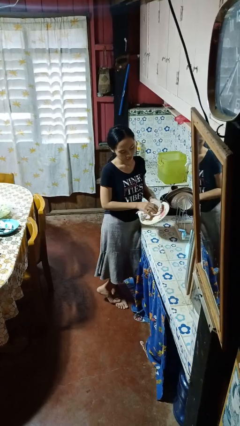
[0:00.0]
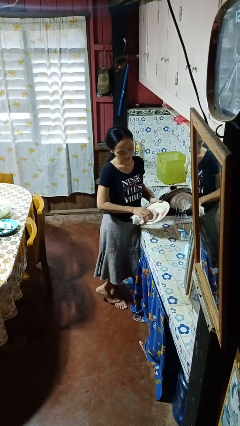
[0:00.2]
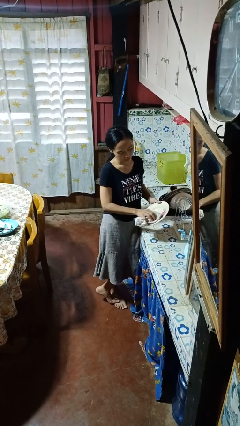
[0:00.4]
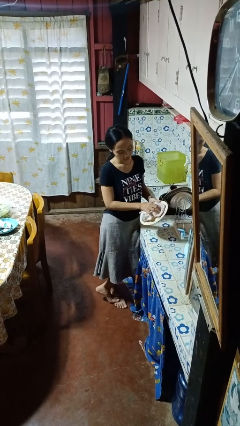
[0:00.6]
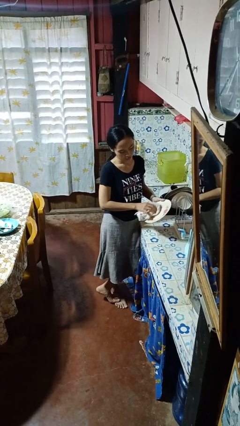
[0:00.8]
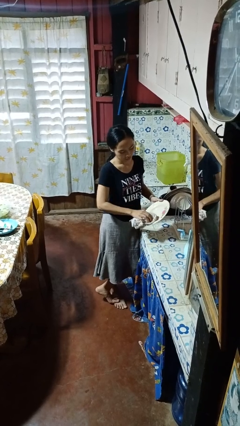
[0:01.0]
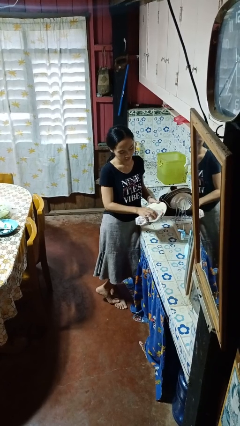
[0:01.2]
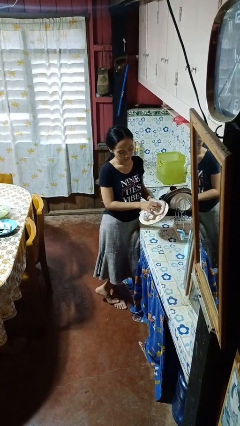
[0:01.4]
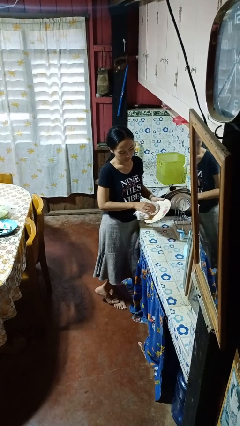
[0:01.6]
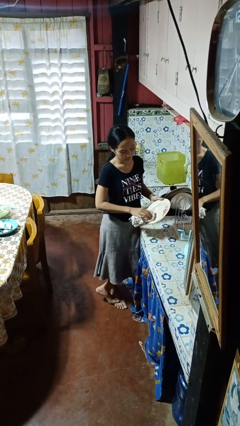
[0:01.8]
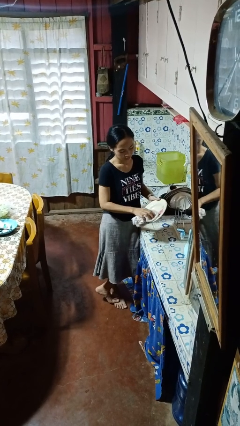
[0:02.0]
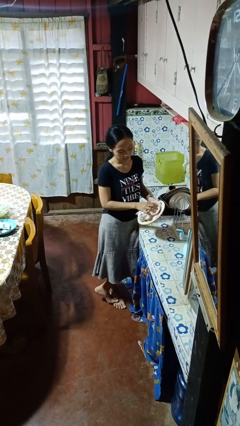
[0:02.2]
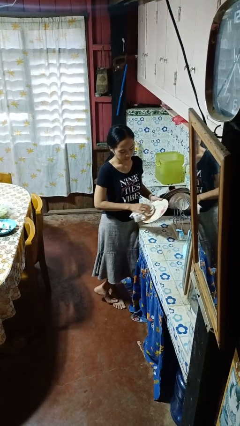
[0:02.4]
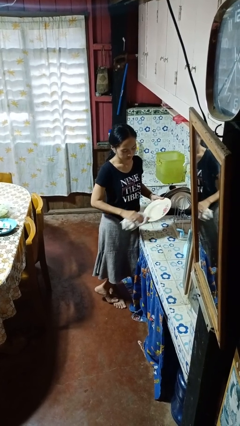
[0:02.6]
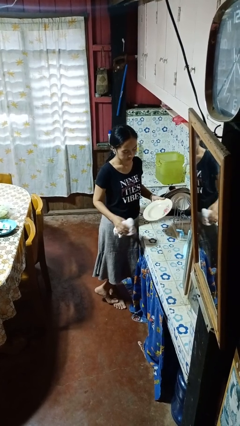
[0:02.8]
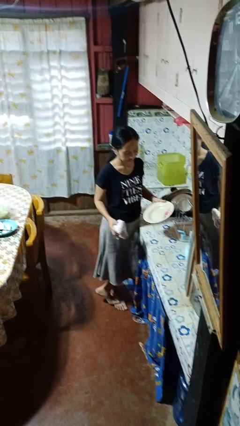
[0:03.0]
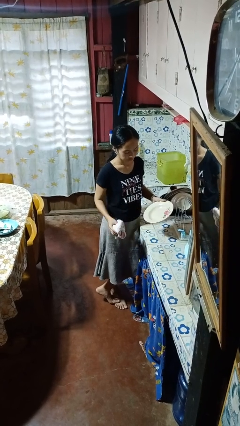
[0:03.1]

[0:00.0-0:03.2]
person dries dish

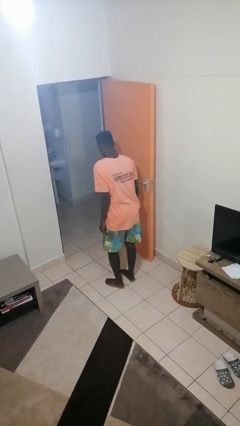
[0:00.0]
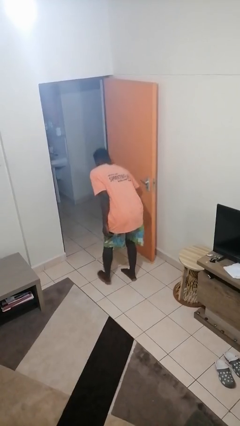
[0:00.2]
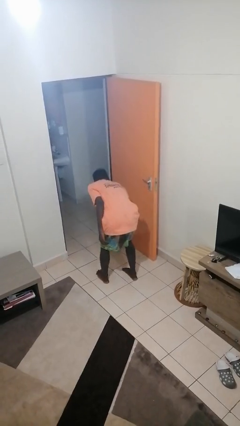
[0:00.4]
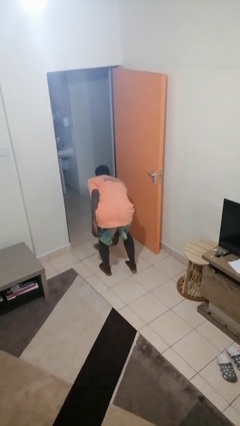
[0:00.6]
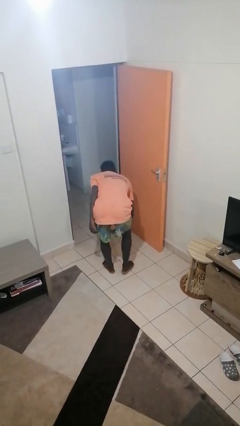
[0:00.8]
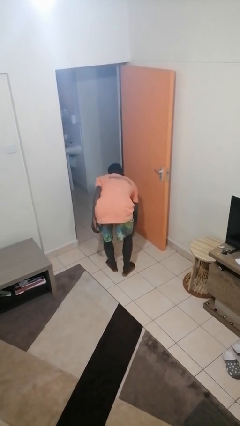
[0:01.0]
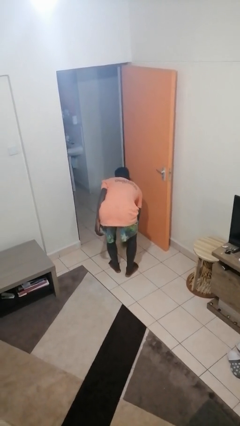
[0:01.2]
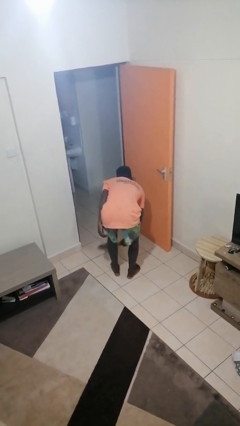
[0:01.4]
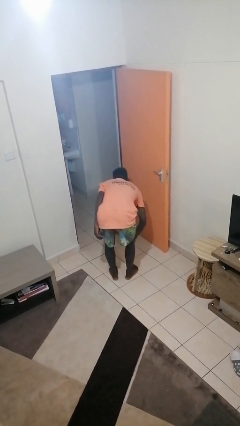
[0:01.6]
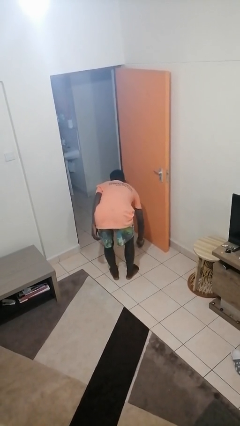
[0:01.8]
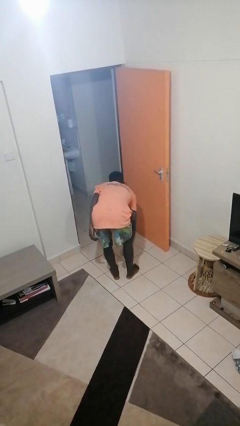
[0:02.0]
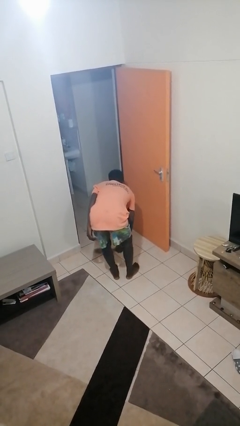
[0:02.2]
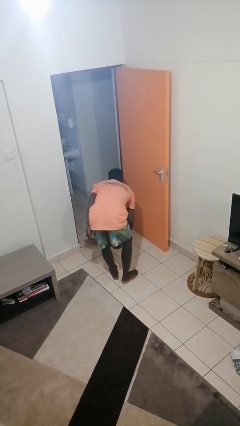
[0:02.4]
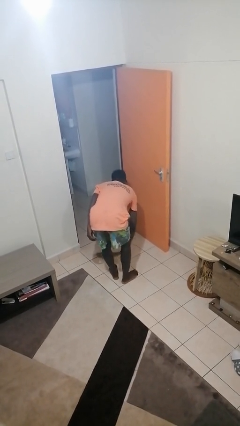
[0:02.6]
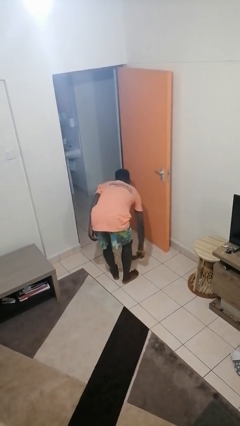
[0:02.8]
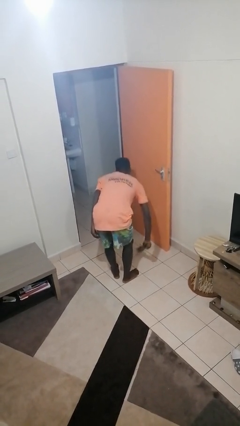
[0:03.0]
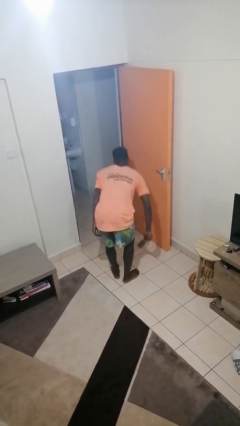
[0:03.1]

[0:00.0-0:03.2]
person sweeps floor

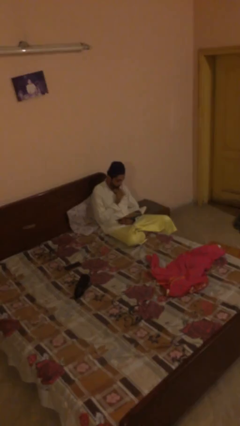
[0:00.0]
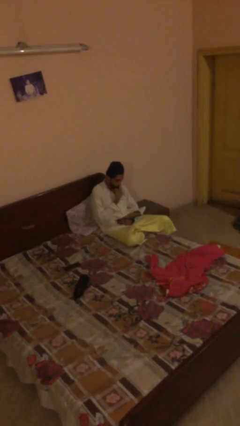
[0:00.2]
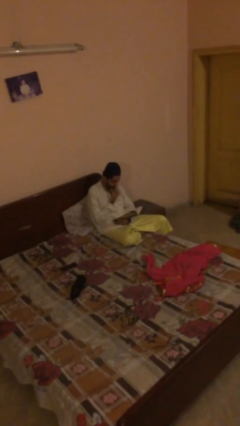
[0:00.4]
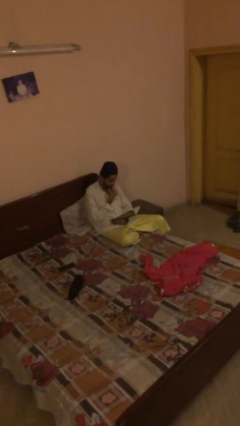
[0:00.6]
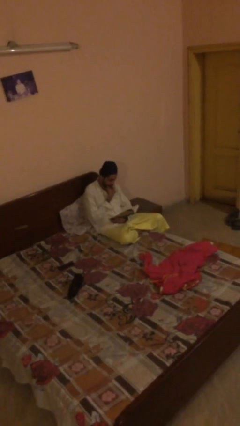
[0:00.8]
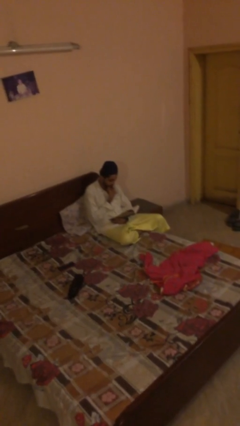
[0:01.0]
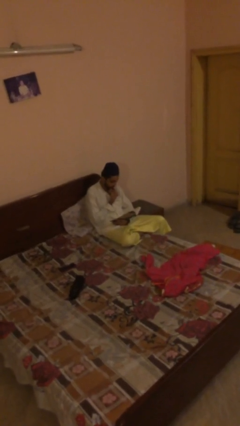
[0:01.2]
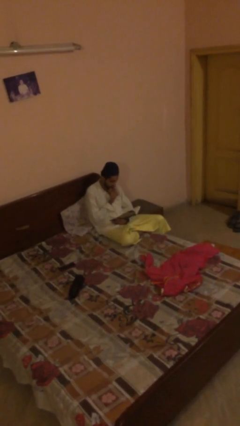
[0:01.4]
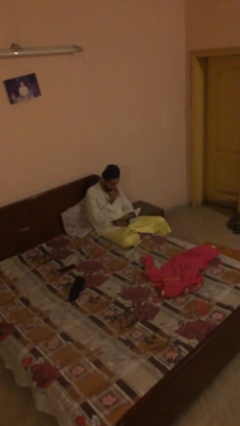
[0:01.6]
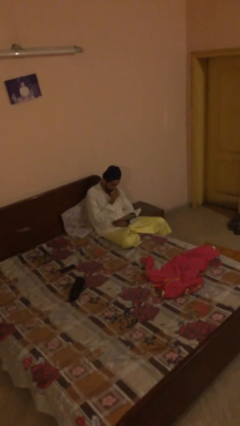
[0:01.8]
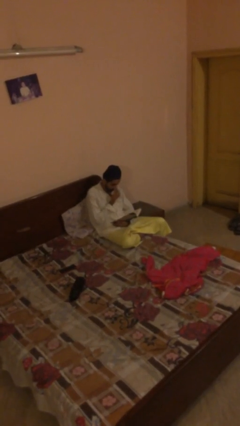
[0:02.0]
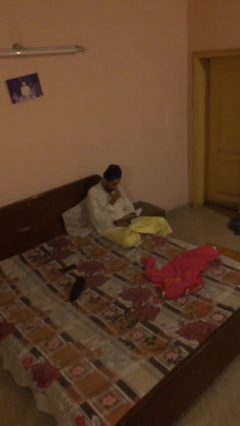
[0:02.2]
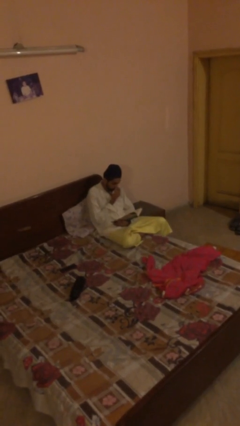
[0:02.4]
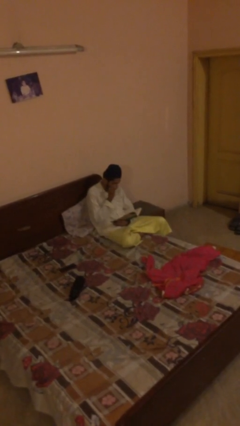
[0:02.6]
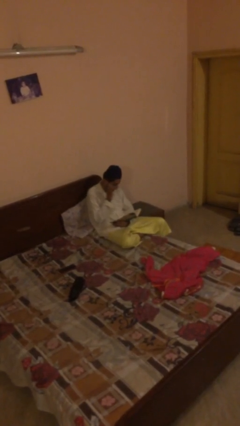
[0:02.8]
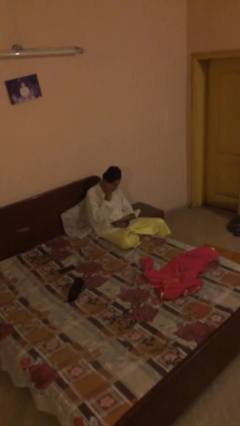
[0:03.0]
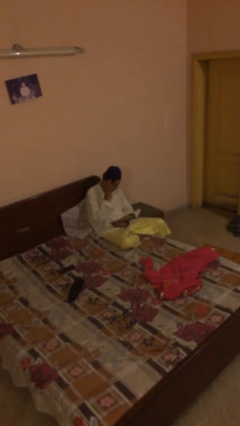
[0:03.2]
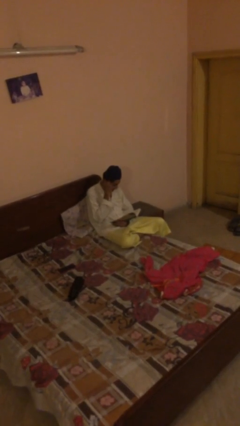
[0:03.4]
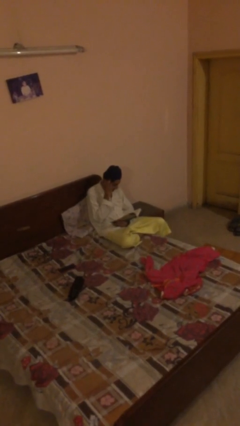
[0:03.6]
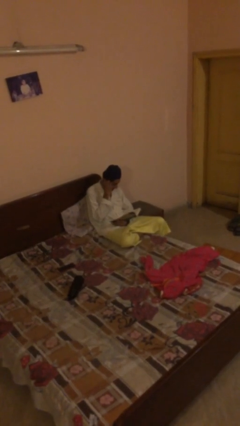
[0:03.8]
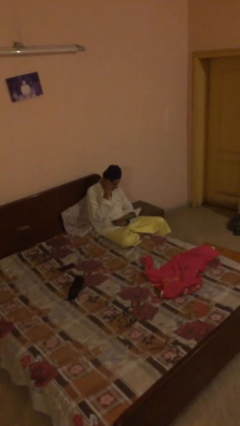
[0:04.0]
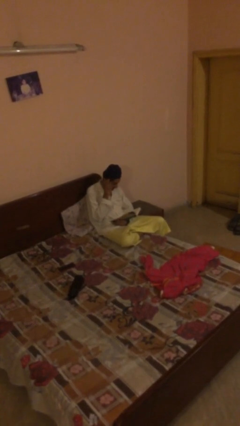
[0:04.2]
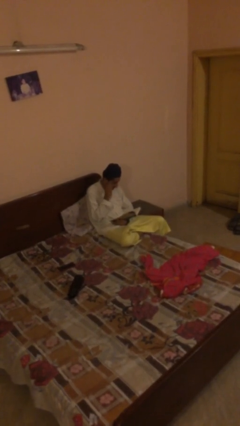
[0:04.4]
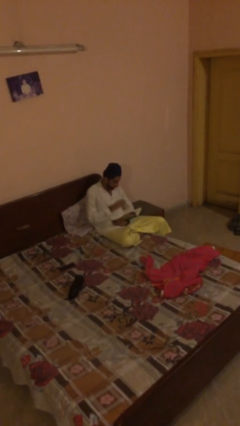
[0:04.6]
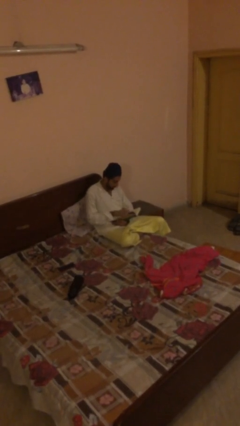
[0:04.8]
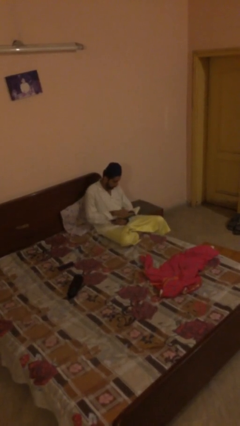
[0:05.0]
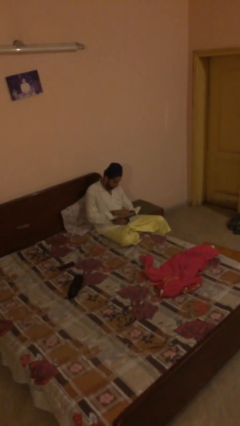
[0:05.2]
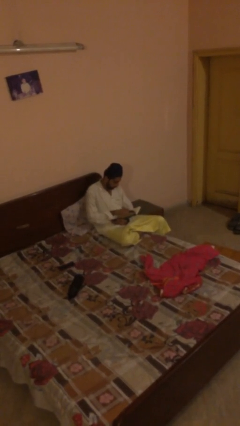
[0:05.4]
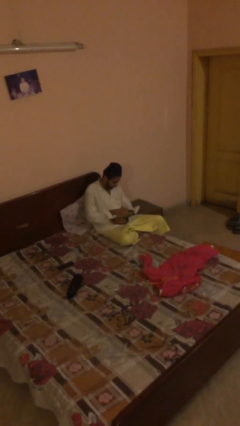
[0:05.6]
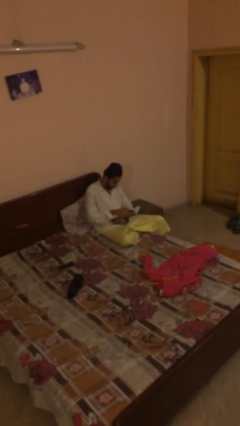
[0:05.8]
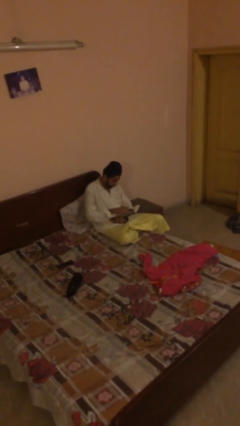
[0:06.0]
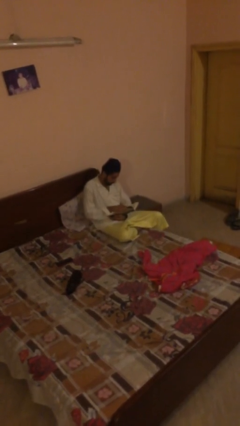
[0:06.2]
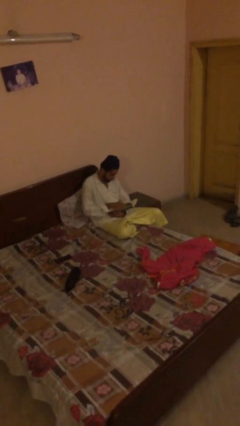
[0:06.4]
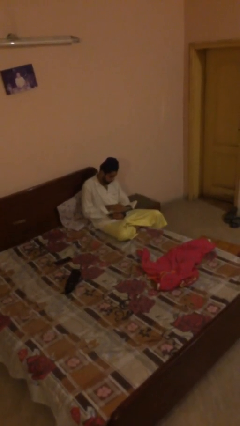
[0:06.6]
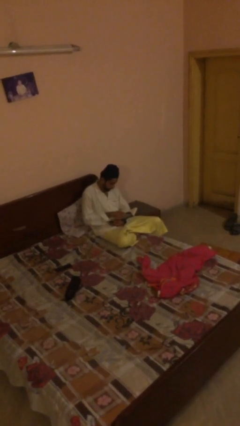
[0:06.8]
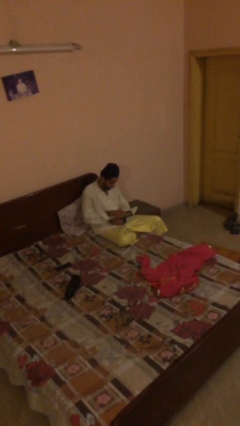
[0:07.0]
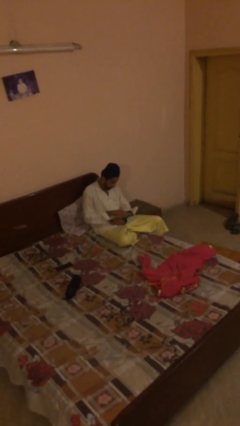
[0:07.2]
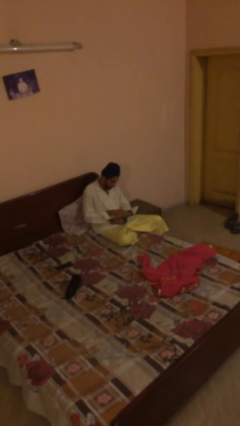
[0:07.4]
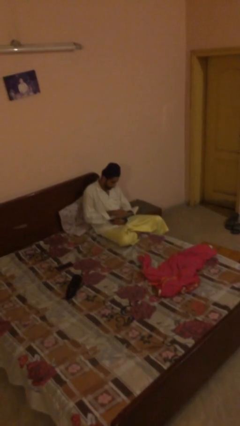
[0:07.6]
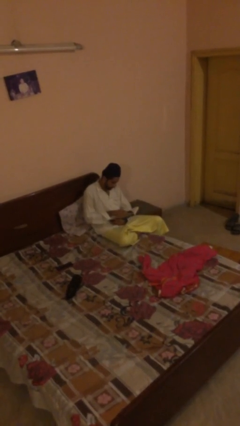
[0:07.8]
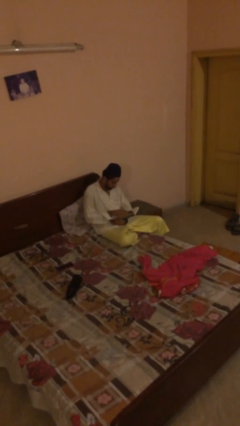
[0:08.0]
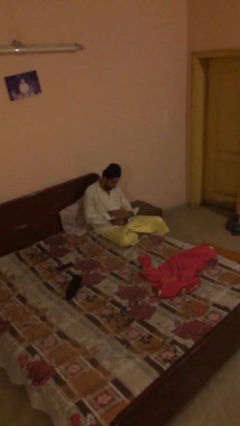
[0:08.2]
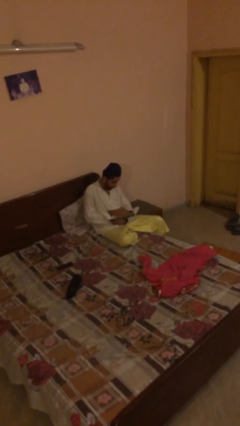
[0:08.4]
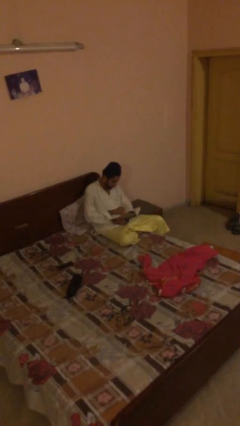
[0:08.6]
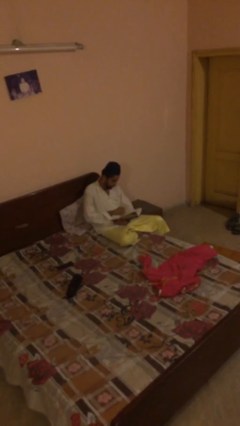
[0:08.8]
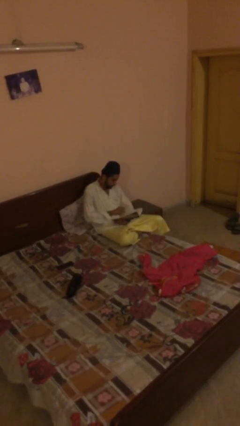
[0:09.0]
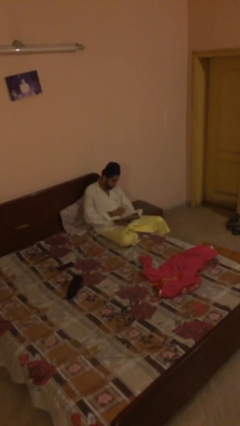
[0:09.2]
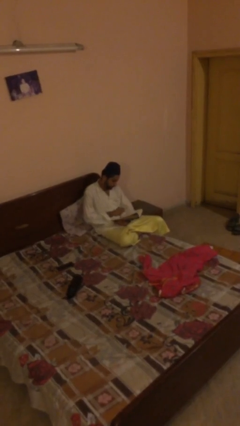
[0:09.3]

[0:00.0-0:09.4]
person reads document

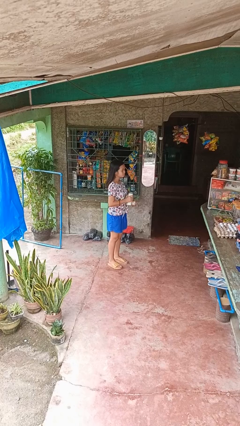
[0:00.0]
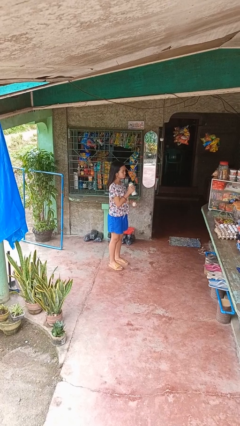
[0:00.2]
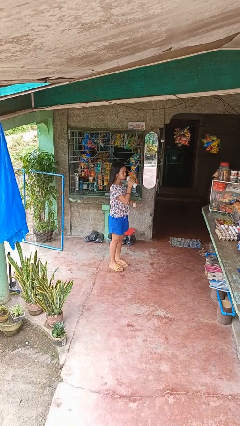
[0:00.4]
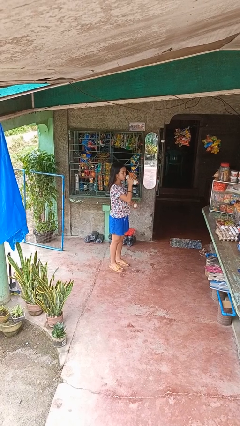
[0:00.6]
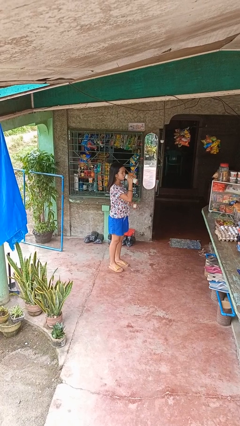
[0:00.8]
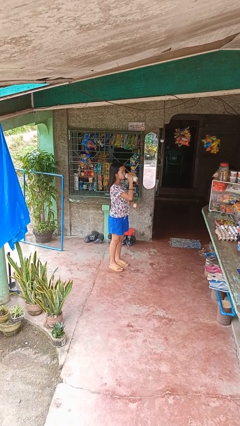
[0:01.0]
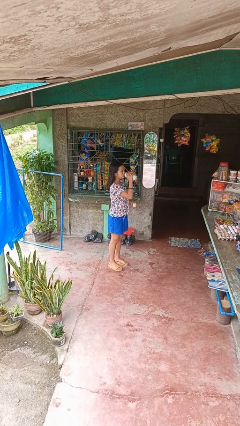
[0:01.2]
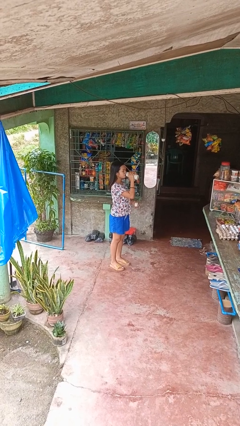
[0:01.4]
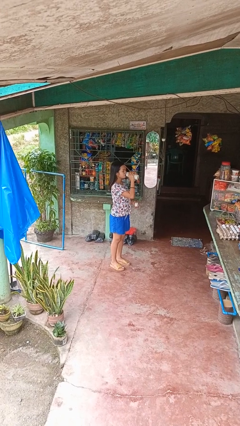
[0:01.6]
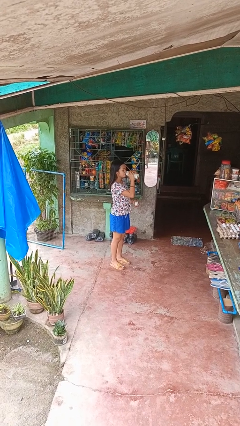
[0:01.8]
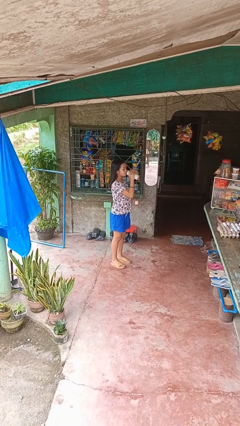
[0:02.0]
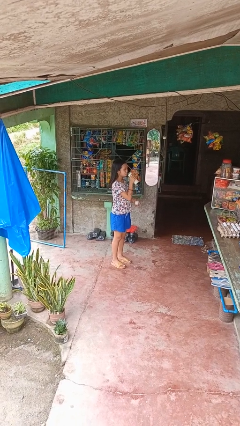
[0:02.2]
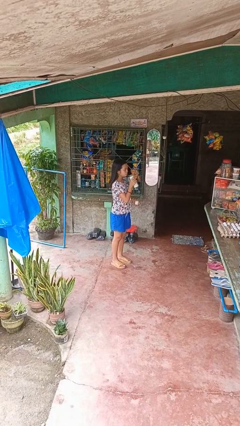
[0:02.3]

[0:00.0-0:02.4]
person drinks from bottle
